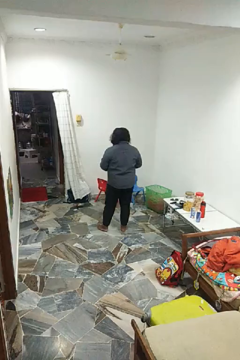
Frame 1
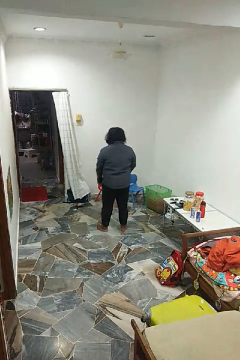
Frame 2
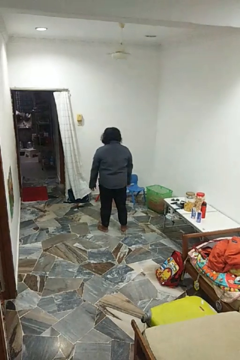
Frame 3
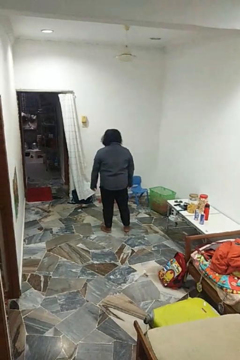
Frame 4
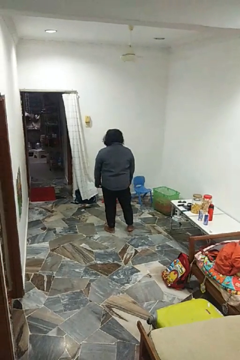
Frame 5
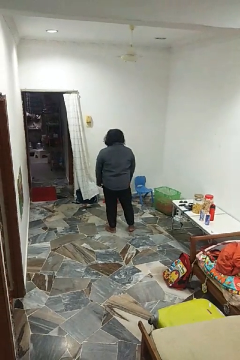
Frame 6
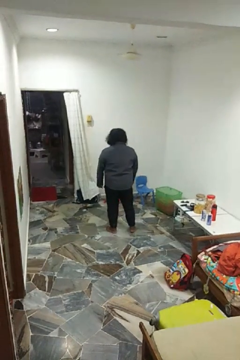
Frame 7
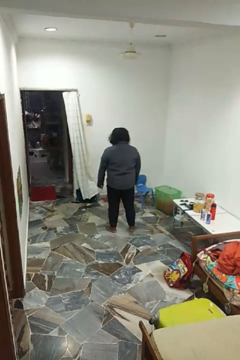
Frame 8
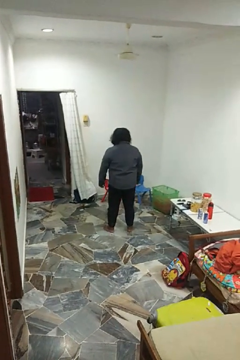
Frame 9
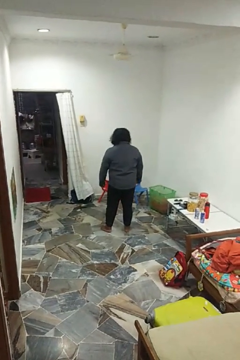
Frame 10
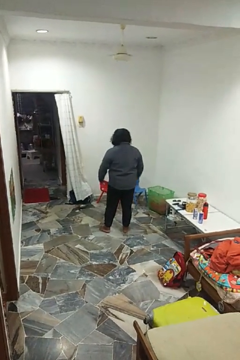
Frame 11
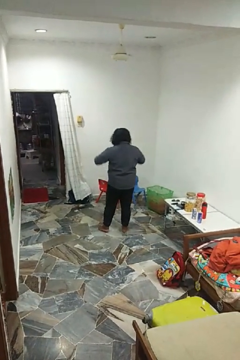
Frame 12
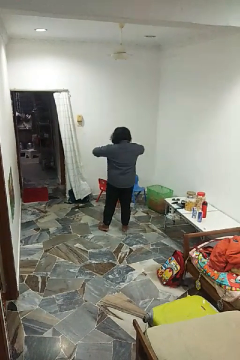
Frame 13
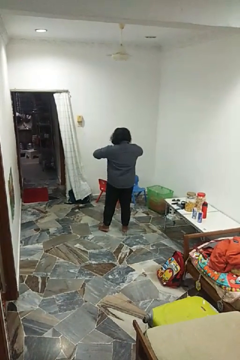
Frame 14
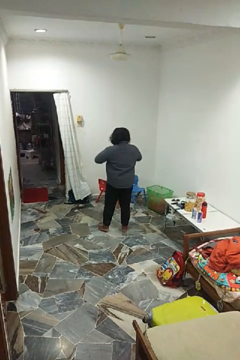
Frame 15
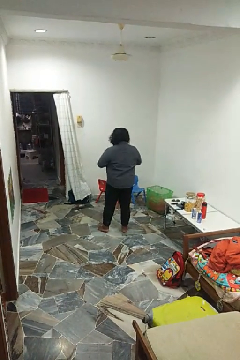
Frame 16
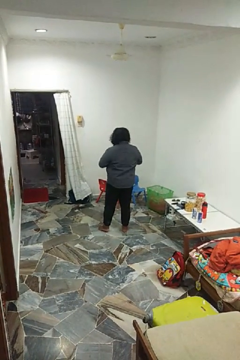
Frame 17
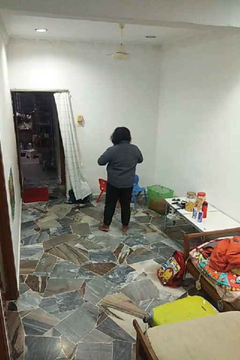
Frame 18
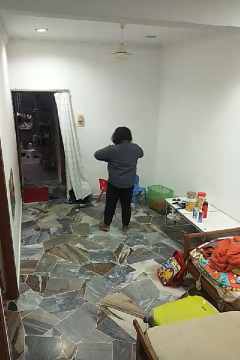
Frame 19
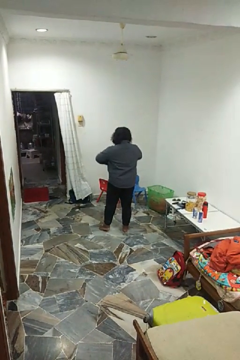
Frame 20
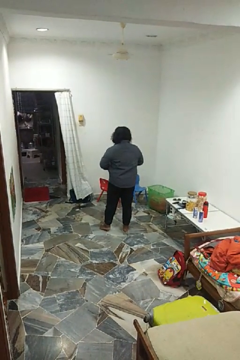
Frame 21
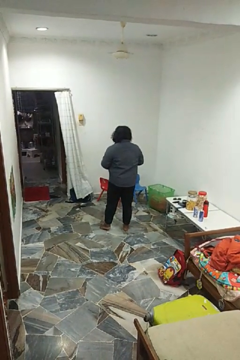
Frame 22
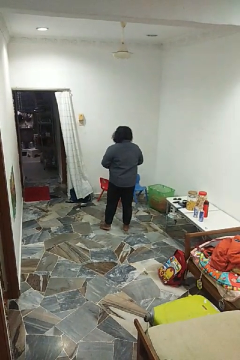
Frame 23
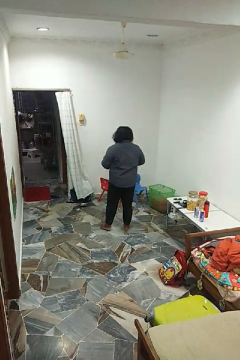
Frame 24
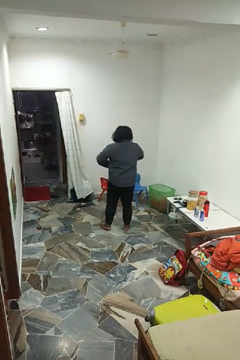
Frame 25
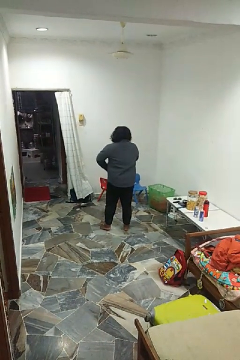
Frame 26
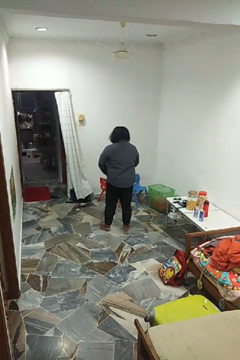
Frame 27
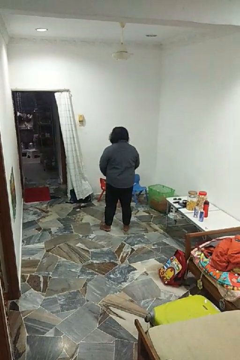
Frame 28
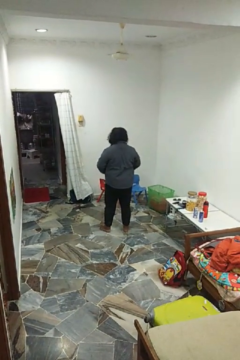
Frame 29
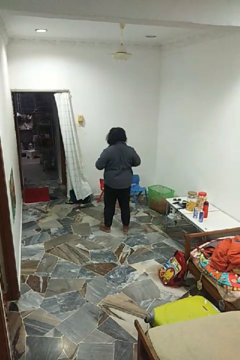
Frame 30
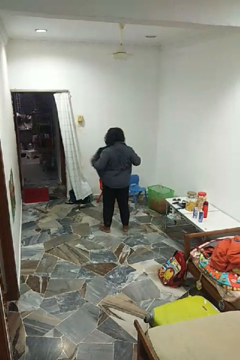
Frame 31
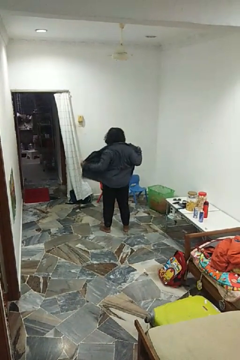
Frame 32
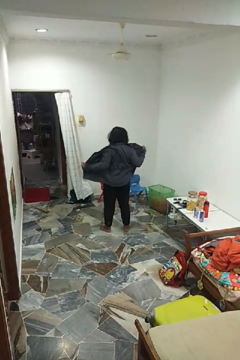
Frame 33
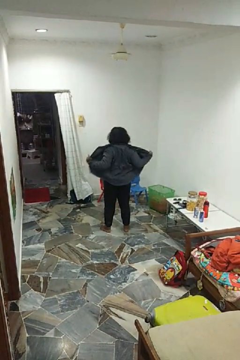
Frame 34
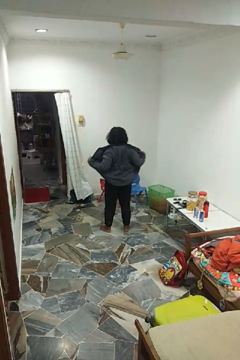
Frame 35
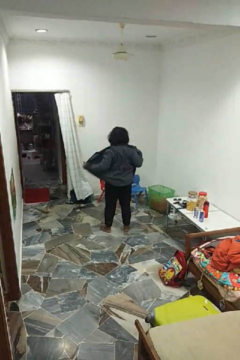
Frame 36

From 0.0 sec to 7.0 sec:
person unbuttons shirt

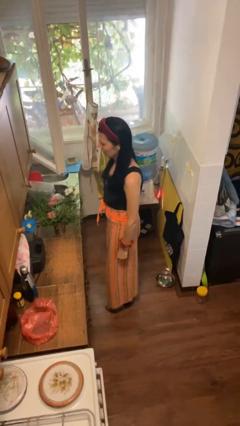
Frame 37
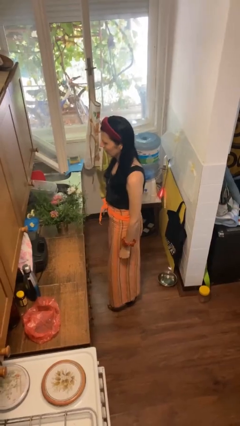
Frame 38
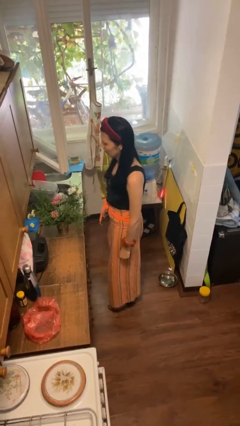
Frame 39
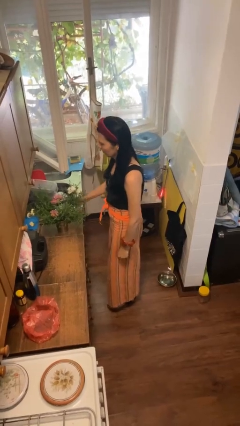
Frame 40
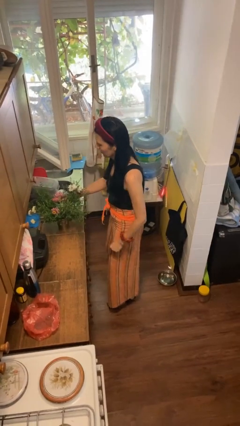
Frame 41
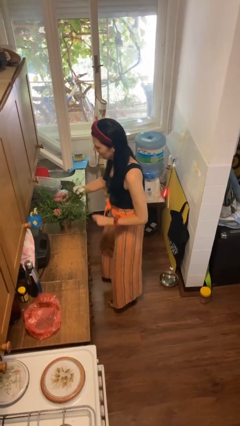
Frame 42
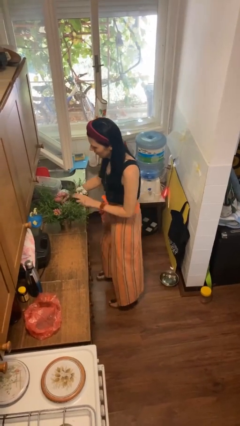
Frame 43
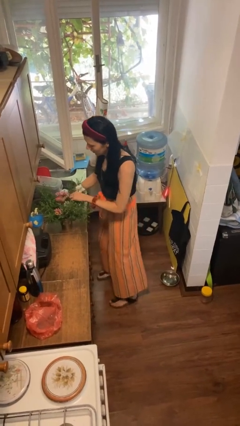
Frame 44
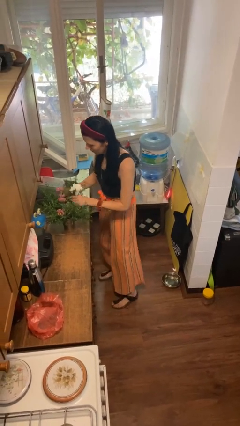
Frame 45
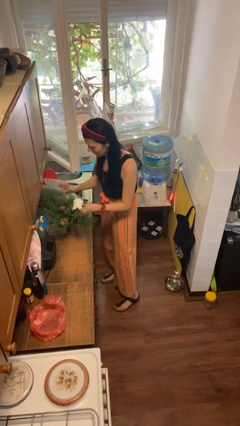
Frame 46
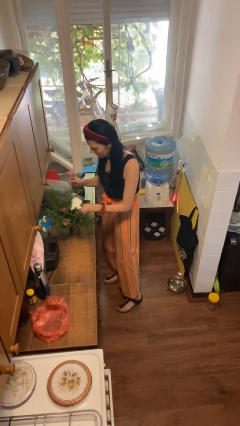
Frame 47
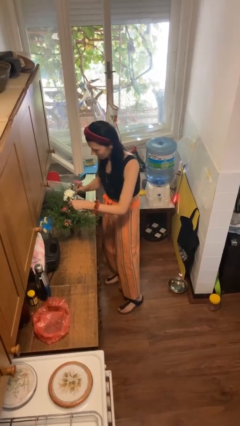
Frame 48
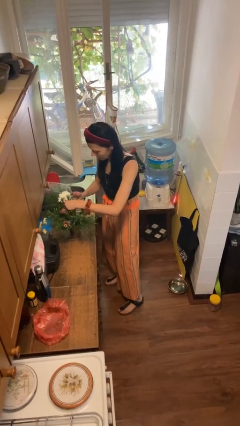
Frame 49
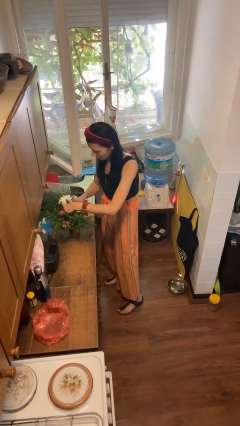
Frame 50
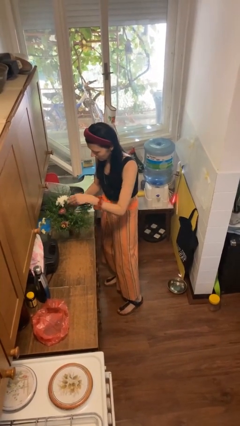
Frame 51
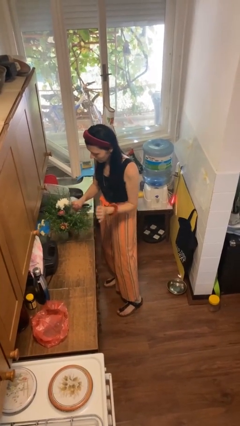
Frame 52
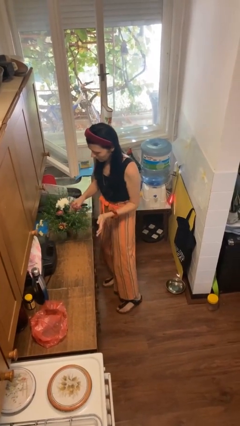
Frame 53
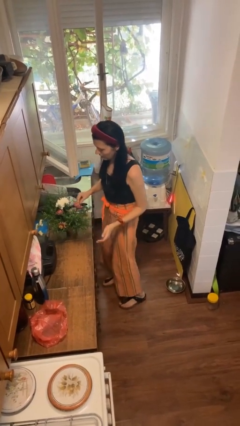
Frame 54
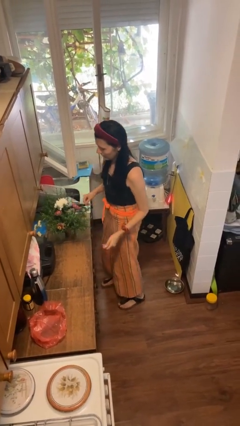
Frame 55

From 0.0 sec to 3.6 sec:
person arranges flowers in vase

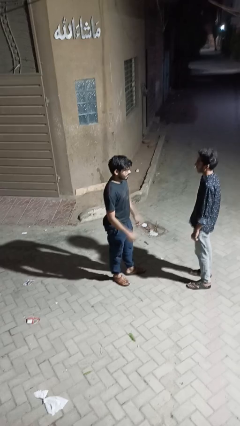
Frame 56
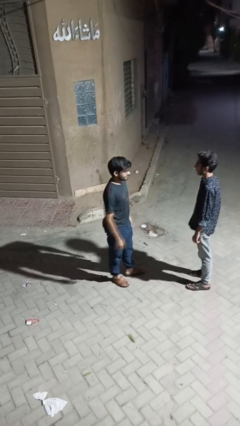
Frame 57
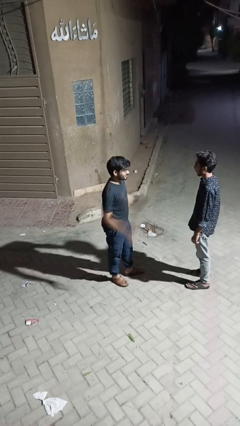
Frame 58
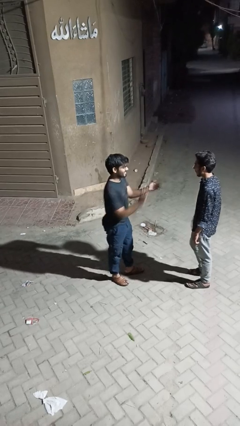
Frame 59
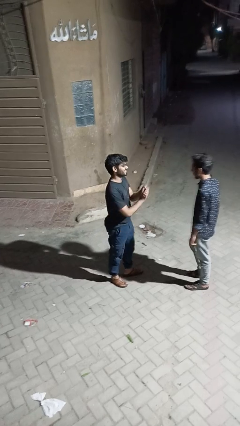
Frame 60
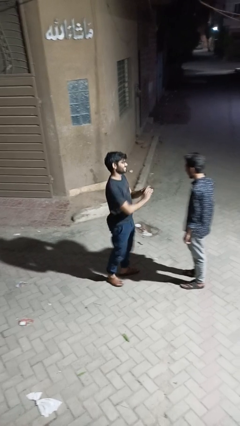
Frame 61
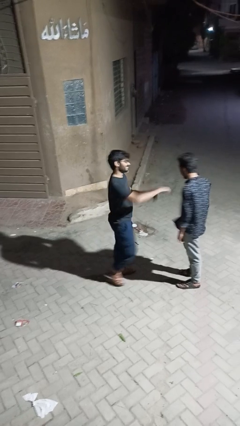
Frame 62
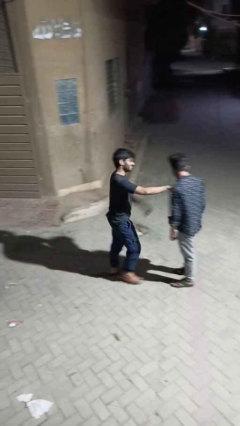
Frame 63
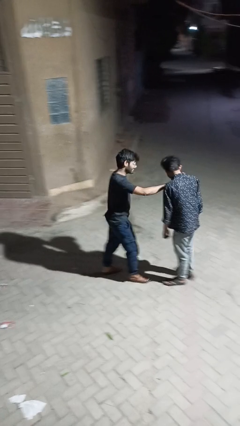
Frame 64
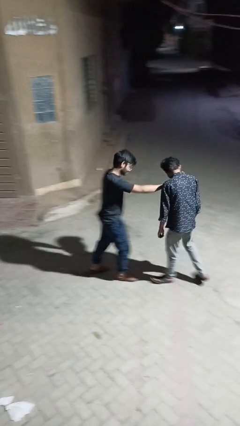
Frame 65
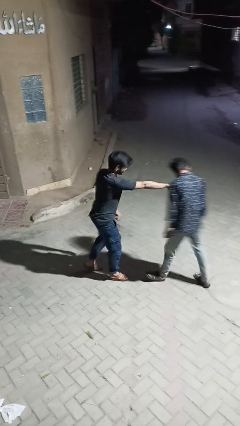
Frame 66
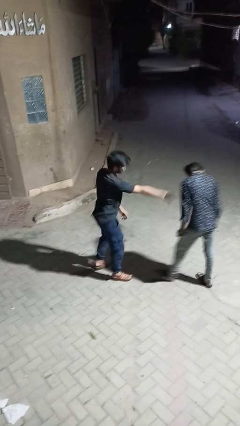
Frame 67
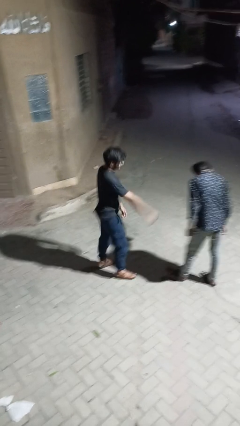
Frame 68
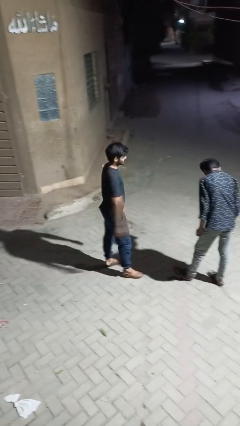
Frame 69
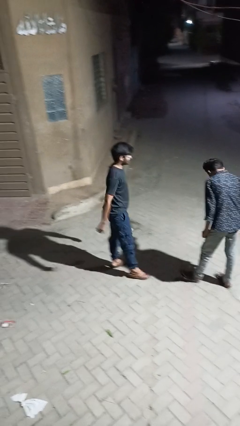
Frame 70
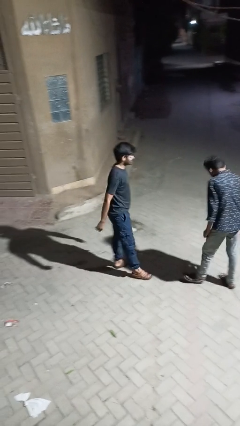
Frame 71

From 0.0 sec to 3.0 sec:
person shoves person

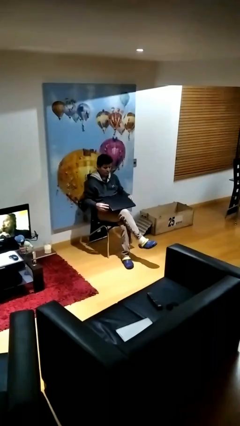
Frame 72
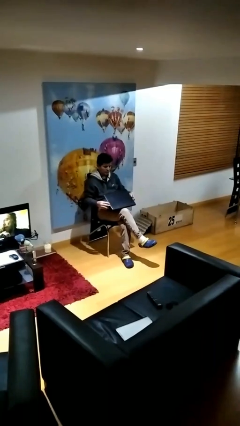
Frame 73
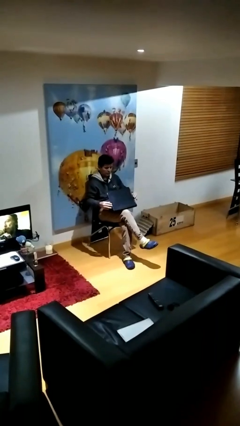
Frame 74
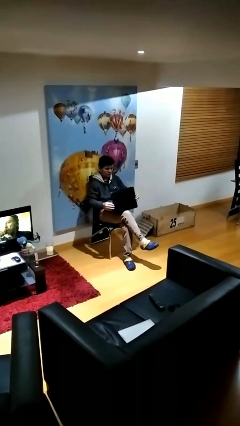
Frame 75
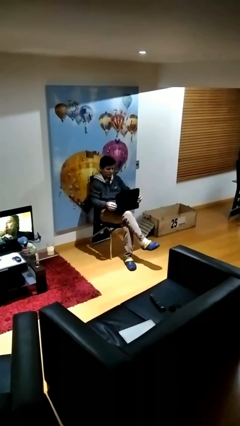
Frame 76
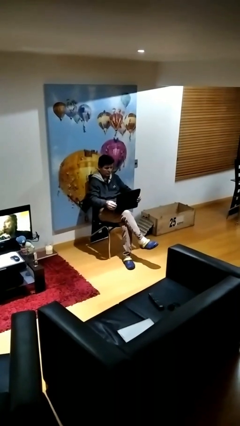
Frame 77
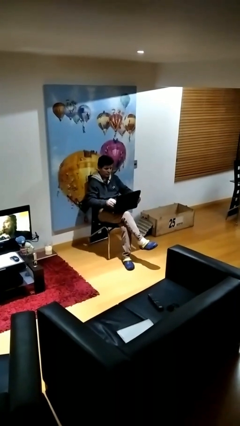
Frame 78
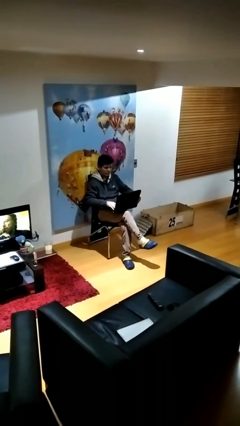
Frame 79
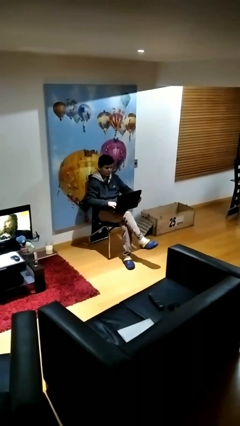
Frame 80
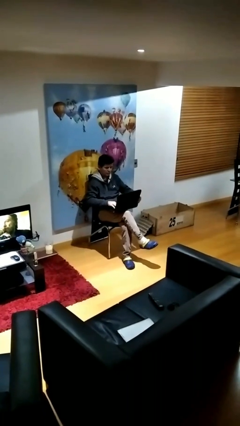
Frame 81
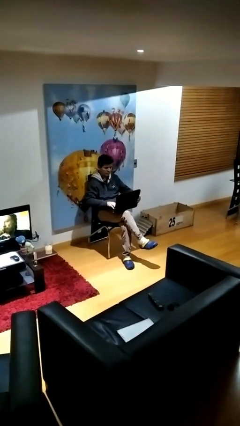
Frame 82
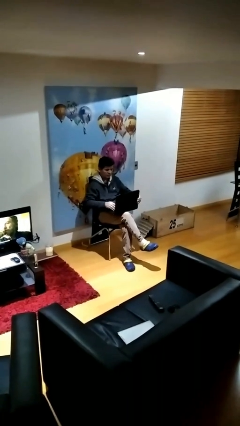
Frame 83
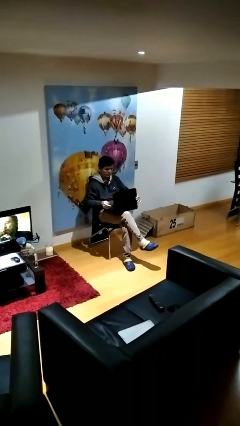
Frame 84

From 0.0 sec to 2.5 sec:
person interacts with laptop

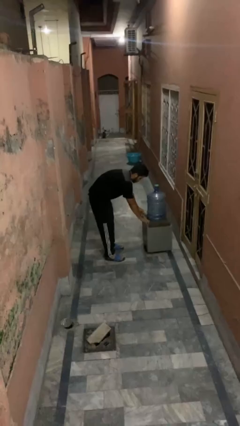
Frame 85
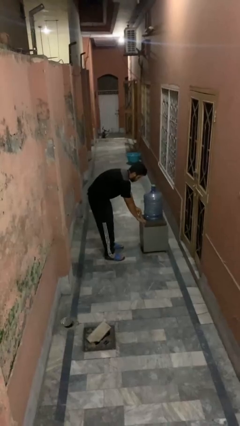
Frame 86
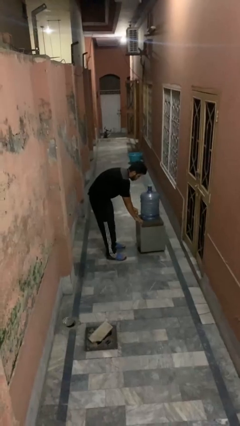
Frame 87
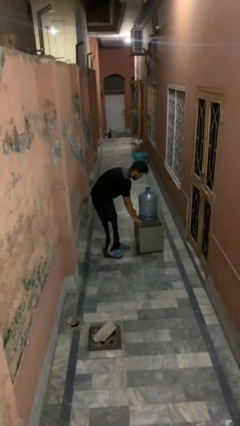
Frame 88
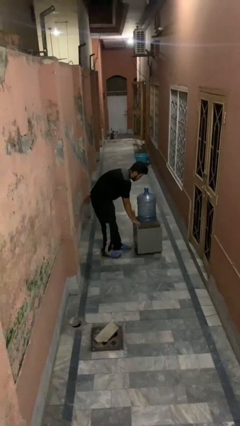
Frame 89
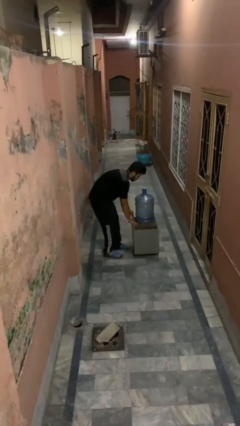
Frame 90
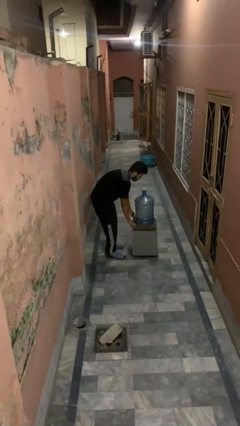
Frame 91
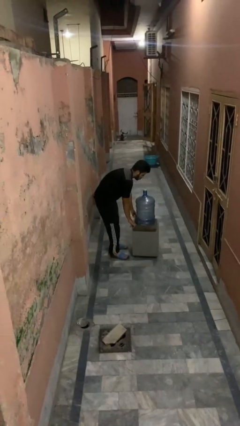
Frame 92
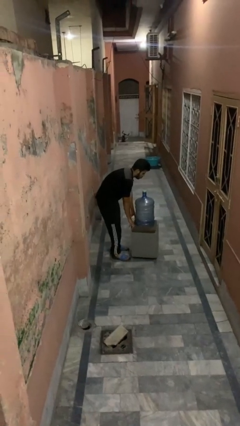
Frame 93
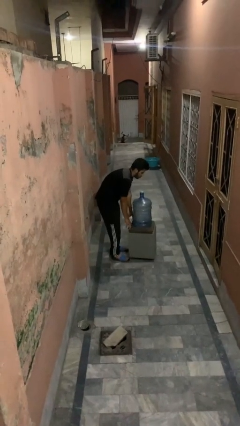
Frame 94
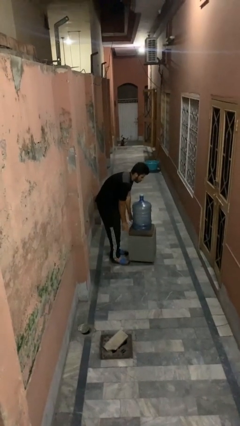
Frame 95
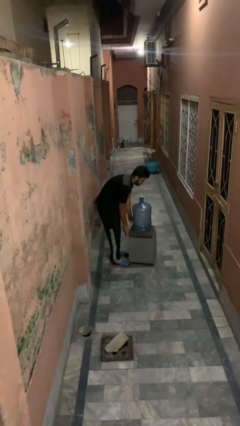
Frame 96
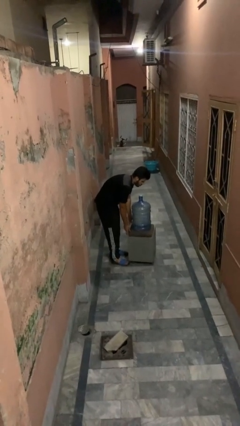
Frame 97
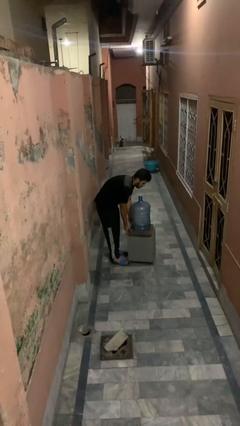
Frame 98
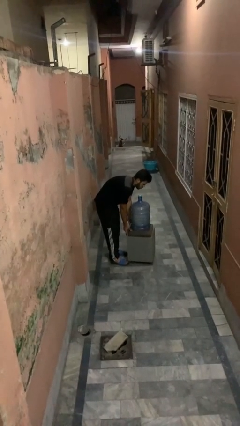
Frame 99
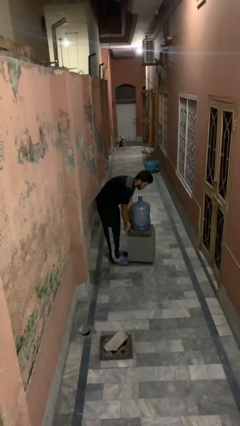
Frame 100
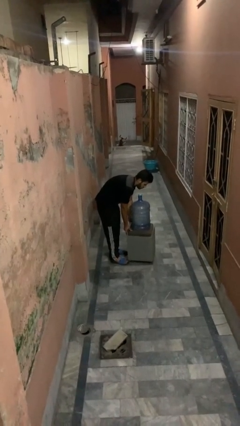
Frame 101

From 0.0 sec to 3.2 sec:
person pulls wheeled cart
